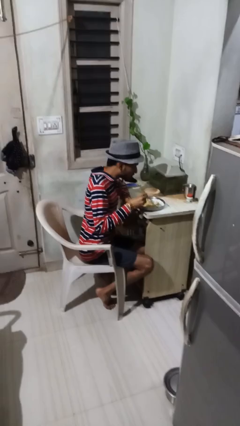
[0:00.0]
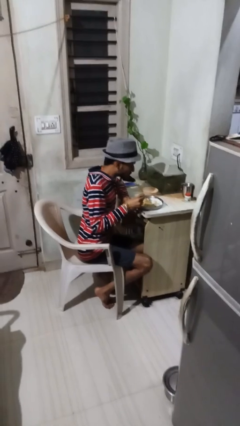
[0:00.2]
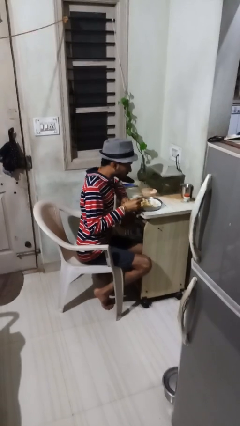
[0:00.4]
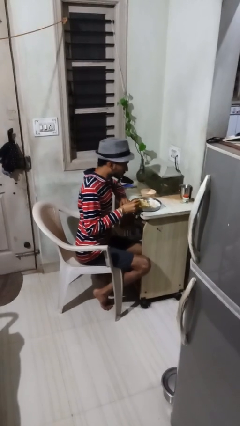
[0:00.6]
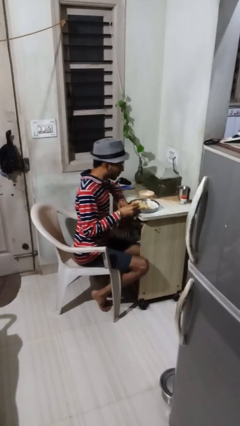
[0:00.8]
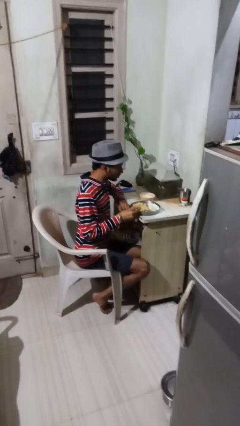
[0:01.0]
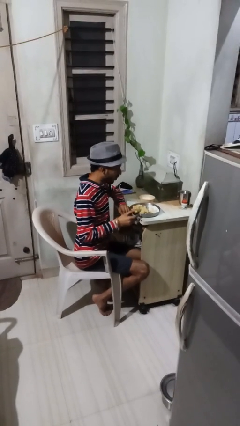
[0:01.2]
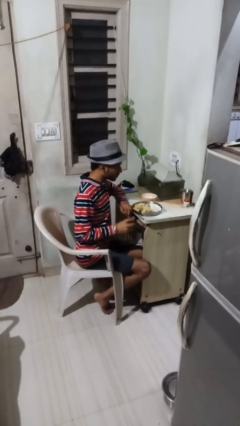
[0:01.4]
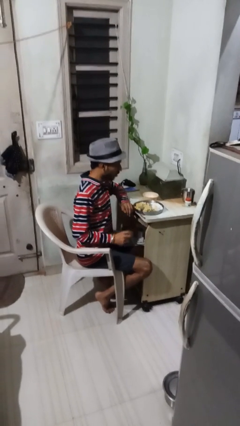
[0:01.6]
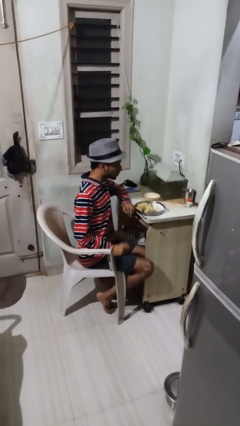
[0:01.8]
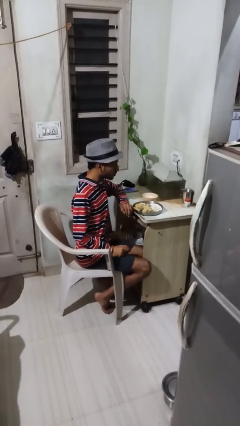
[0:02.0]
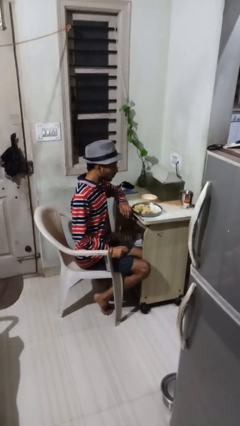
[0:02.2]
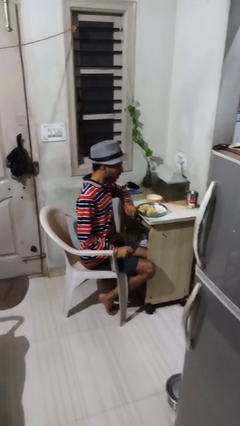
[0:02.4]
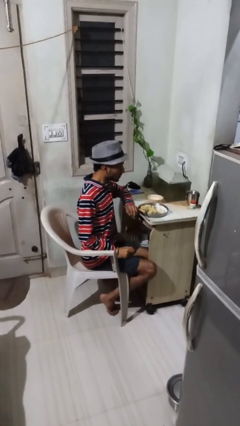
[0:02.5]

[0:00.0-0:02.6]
person eats with utensil

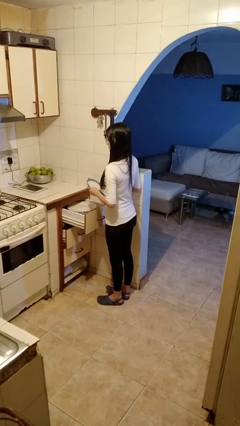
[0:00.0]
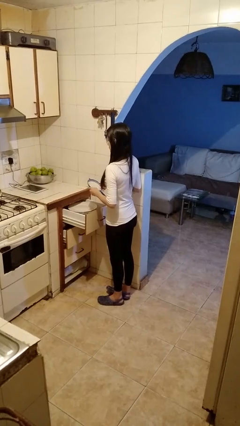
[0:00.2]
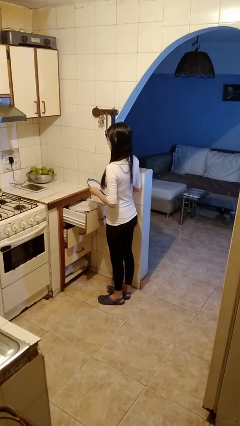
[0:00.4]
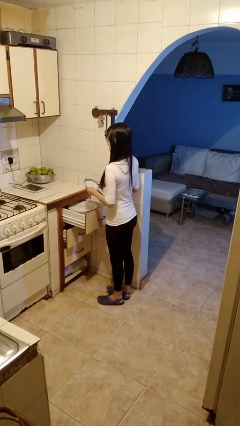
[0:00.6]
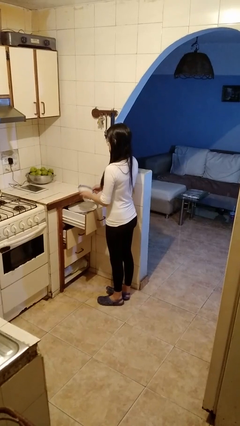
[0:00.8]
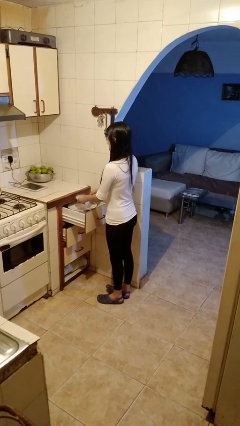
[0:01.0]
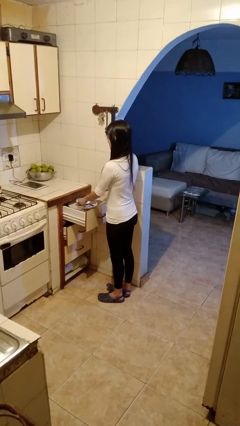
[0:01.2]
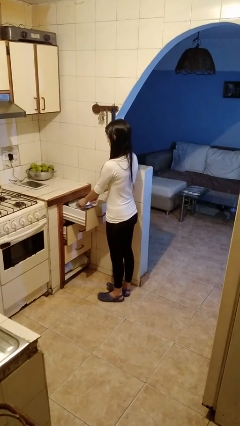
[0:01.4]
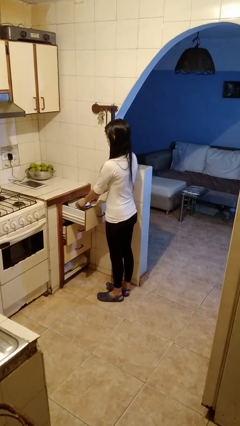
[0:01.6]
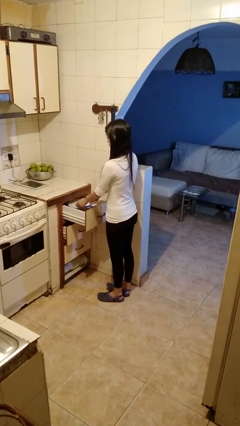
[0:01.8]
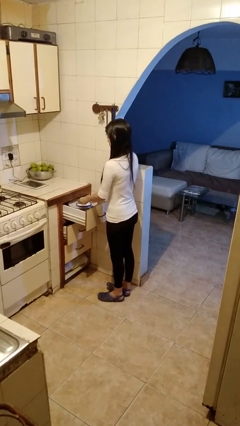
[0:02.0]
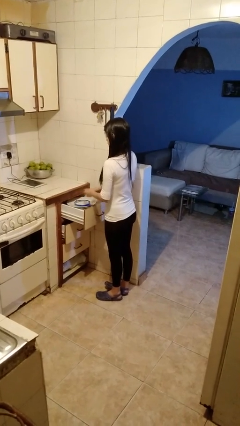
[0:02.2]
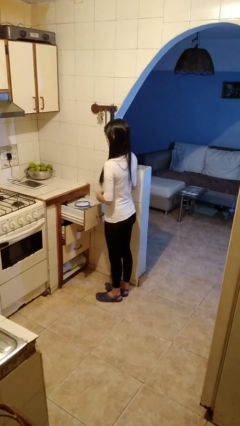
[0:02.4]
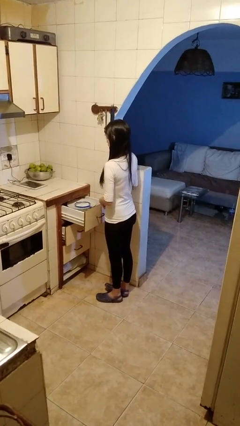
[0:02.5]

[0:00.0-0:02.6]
person puts down object into cabinet

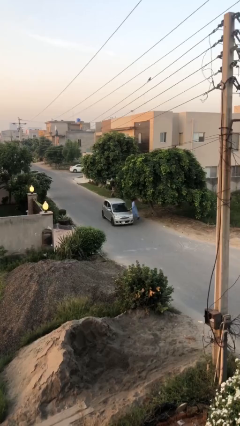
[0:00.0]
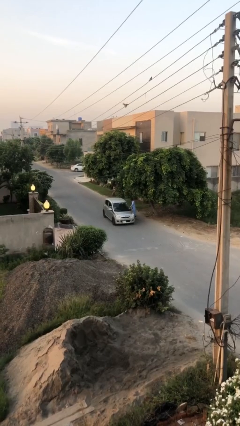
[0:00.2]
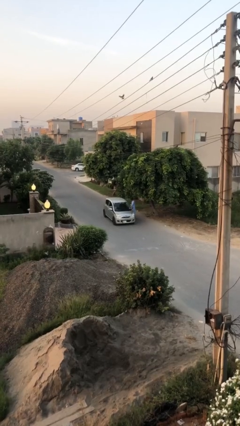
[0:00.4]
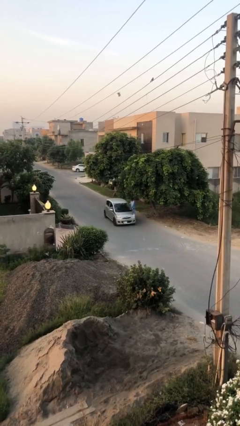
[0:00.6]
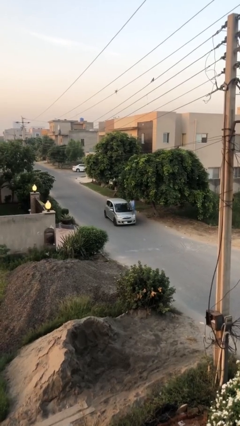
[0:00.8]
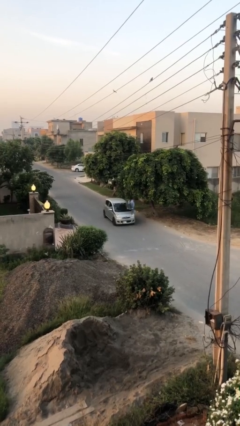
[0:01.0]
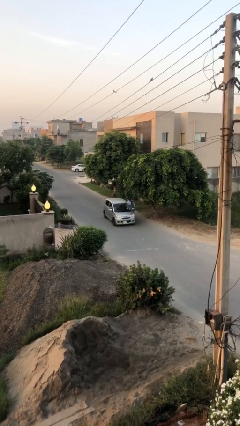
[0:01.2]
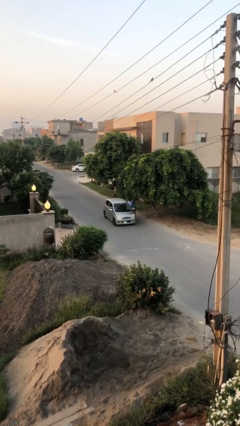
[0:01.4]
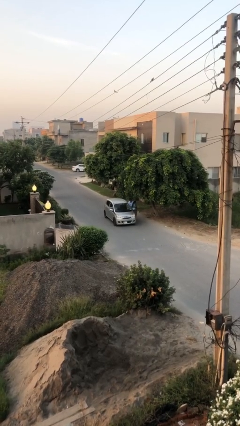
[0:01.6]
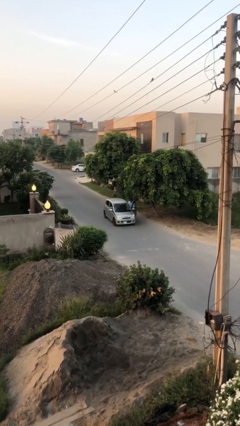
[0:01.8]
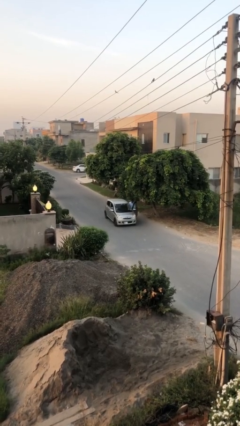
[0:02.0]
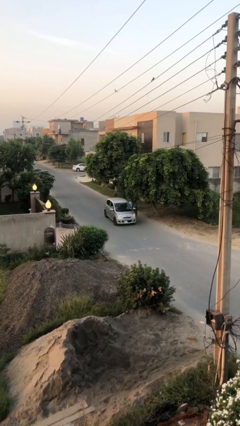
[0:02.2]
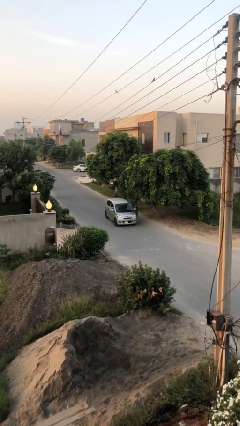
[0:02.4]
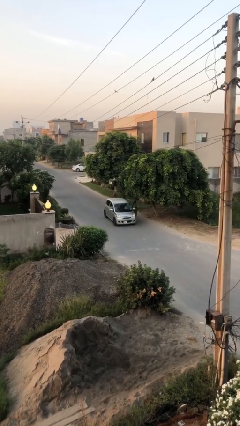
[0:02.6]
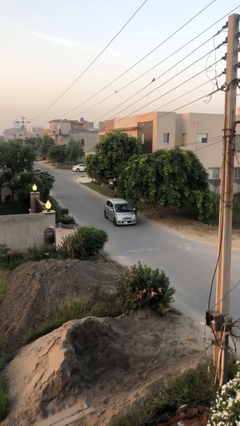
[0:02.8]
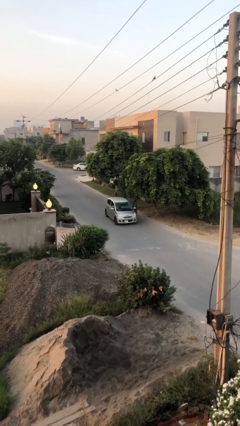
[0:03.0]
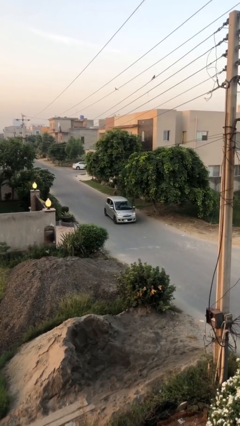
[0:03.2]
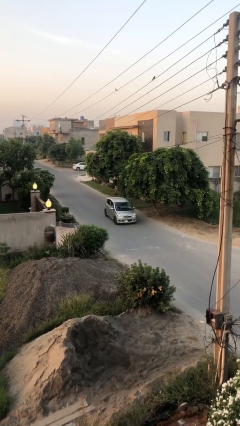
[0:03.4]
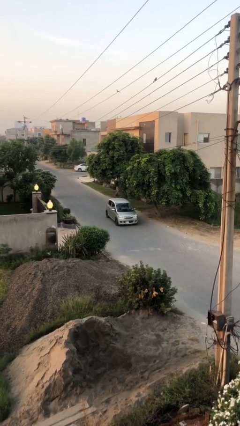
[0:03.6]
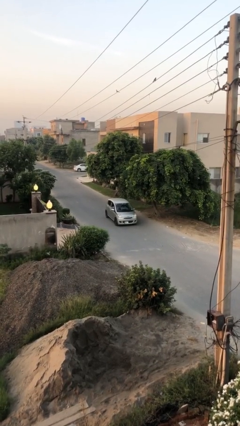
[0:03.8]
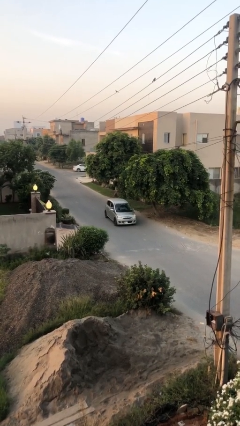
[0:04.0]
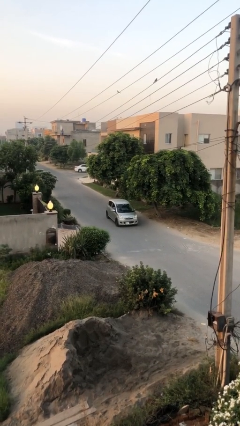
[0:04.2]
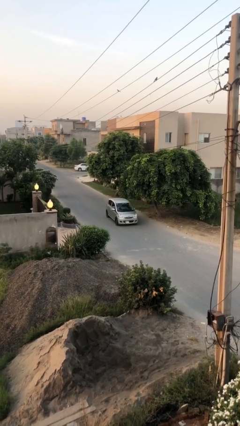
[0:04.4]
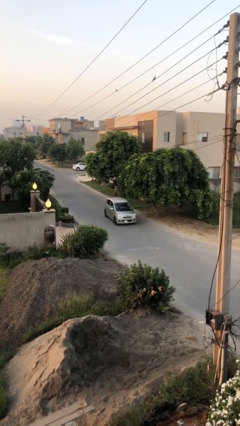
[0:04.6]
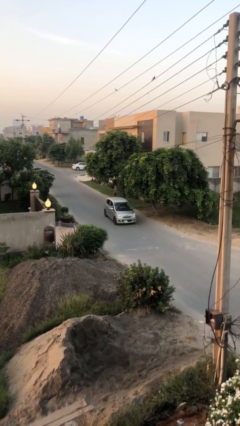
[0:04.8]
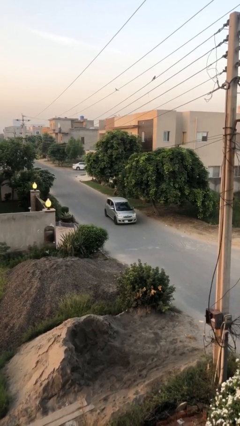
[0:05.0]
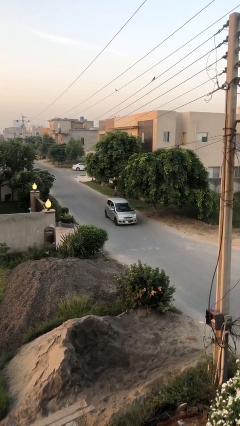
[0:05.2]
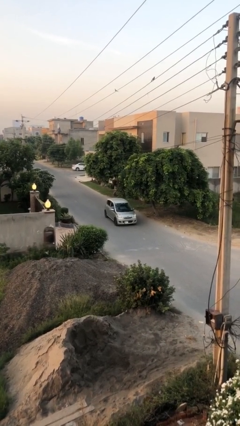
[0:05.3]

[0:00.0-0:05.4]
car picks up person

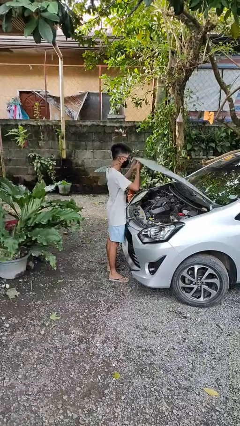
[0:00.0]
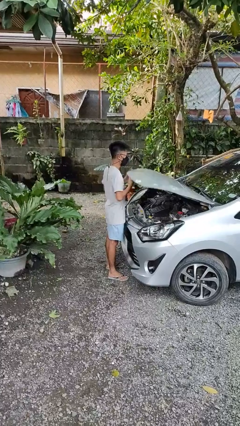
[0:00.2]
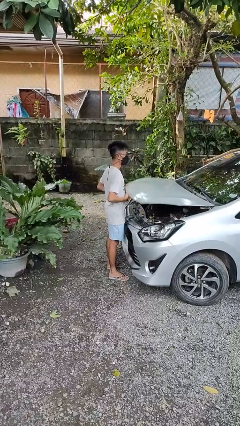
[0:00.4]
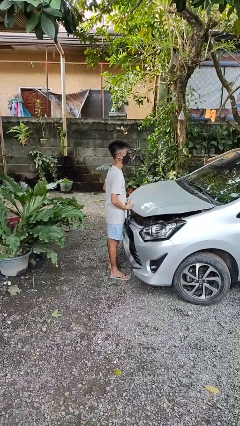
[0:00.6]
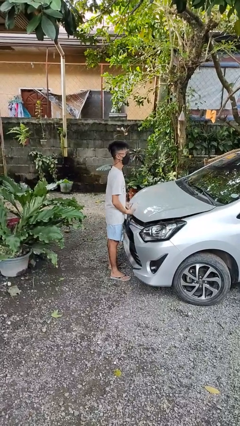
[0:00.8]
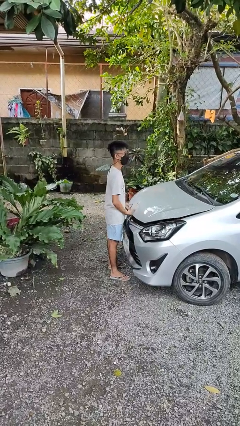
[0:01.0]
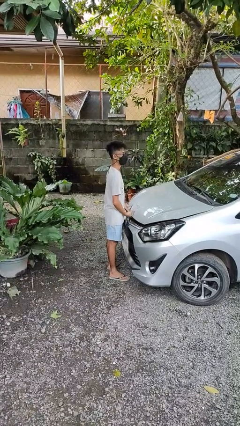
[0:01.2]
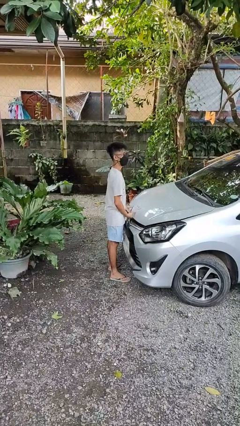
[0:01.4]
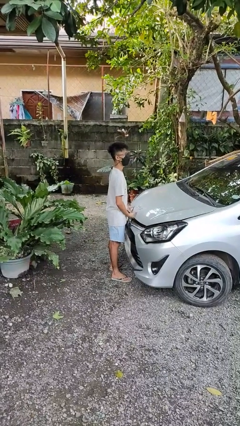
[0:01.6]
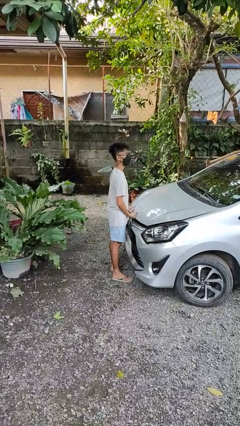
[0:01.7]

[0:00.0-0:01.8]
person closes car hood

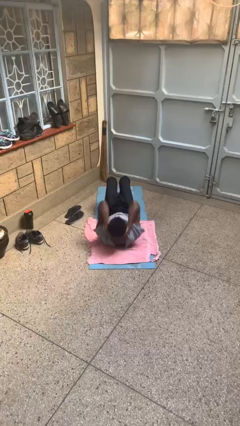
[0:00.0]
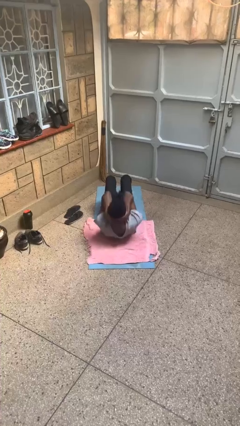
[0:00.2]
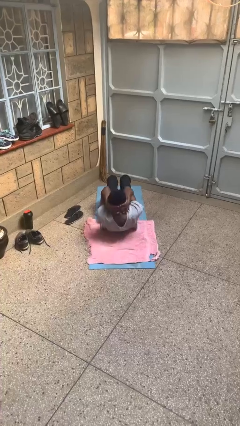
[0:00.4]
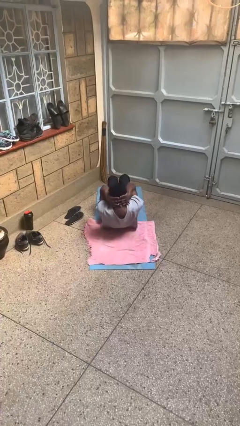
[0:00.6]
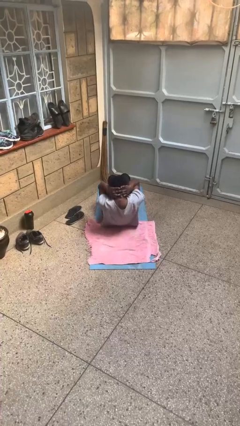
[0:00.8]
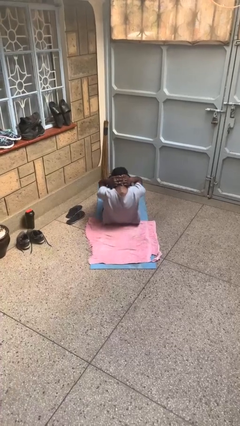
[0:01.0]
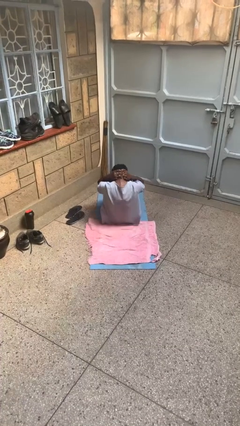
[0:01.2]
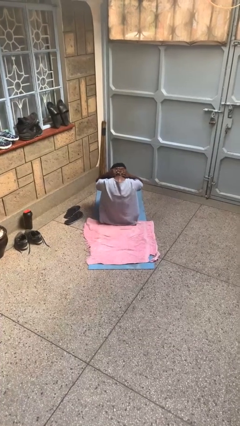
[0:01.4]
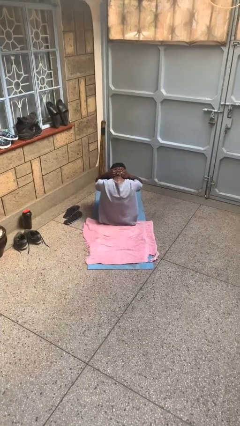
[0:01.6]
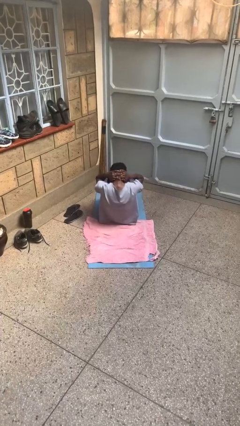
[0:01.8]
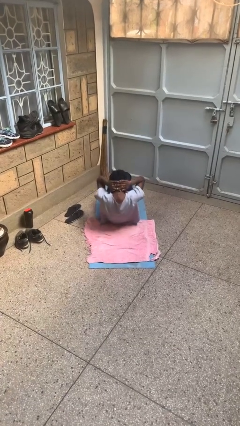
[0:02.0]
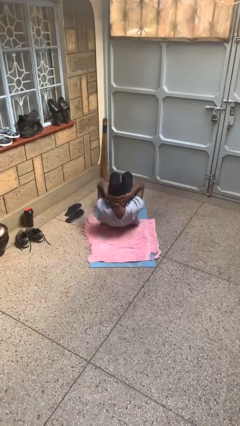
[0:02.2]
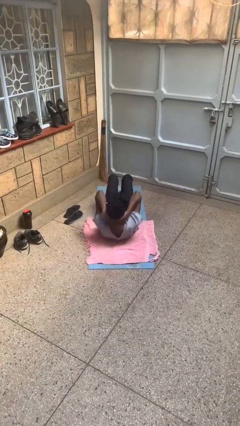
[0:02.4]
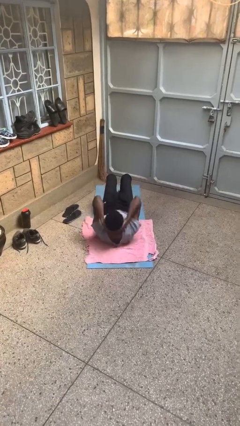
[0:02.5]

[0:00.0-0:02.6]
person exercises with situp

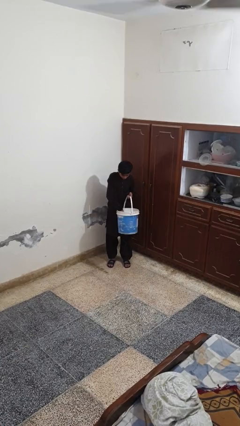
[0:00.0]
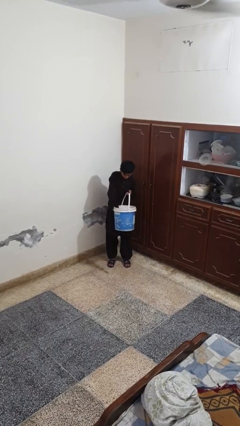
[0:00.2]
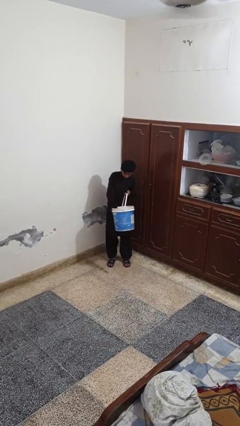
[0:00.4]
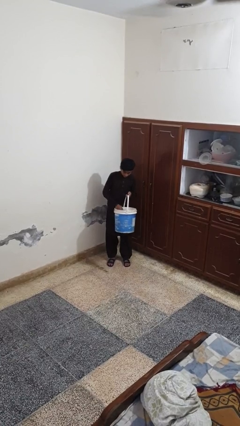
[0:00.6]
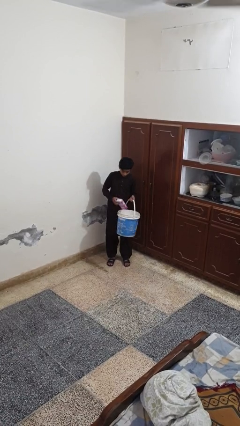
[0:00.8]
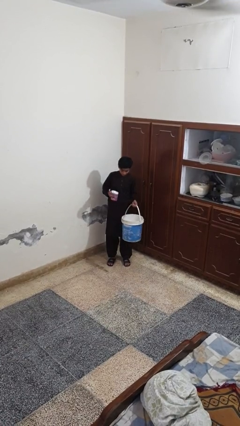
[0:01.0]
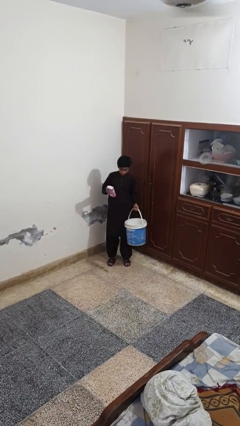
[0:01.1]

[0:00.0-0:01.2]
person takes object from basket

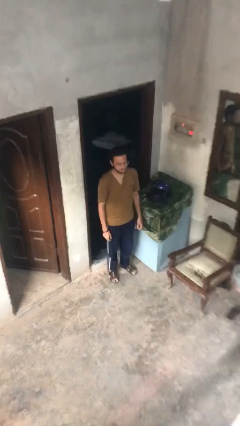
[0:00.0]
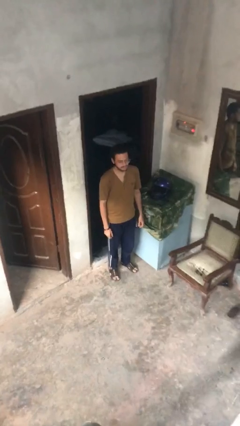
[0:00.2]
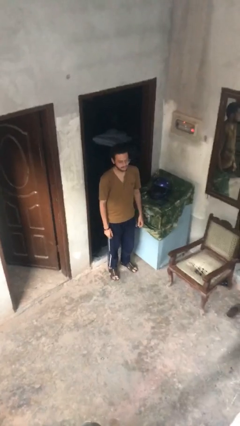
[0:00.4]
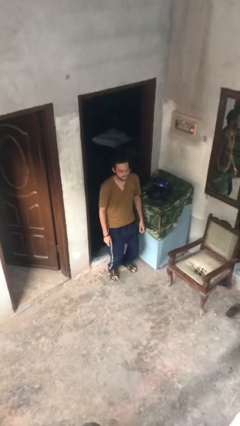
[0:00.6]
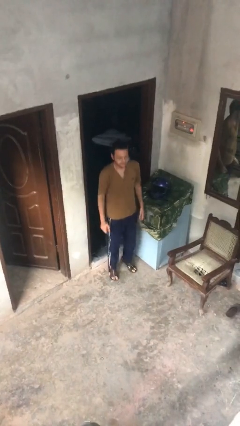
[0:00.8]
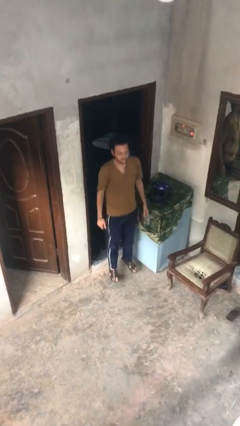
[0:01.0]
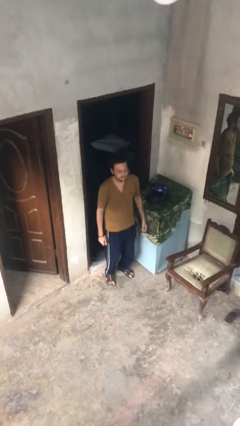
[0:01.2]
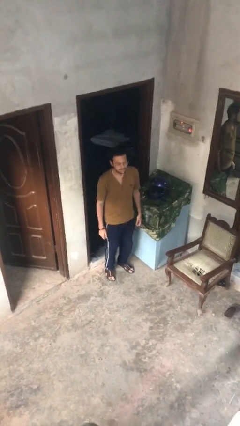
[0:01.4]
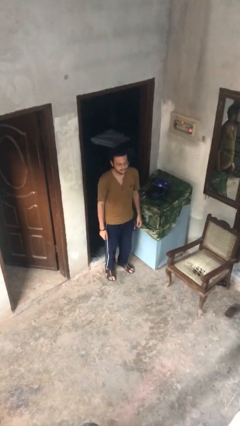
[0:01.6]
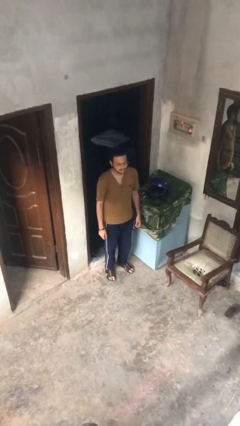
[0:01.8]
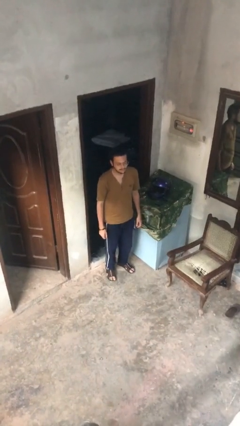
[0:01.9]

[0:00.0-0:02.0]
person jumps
